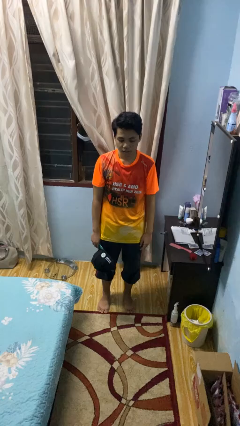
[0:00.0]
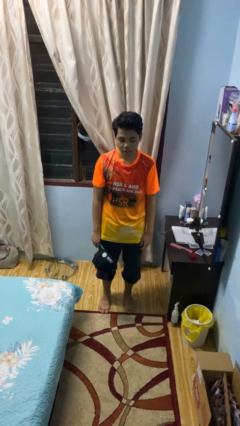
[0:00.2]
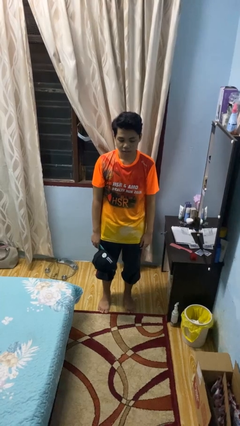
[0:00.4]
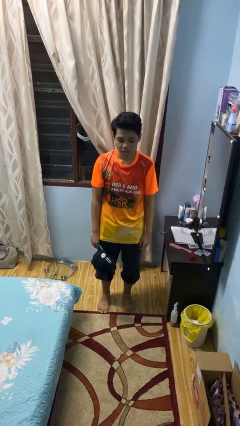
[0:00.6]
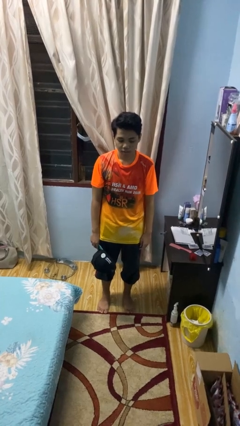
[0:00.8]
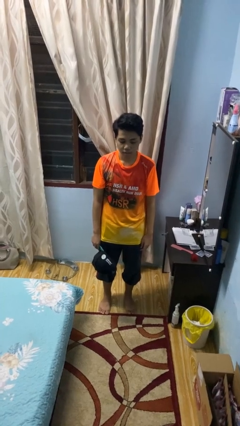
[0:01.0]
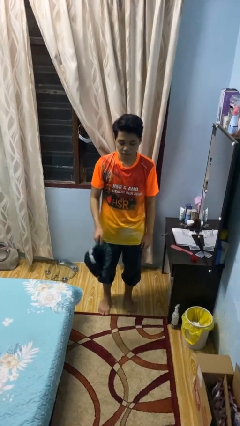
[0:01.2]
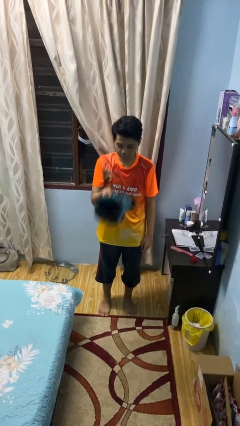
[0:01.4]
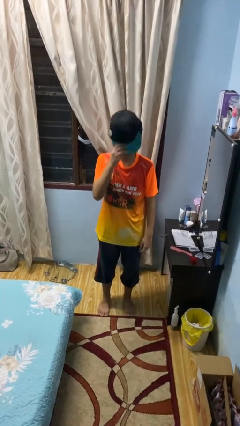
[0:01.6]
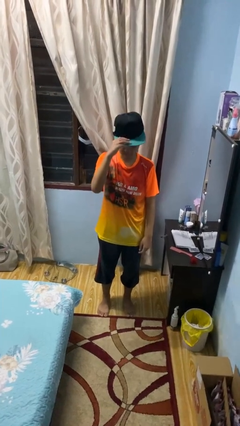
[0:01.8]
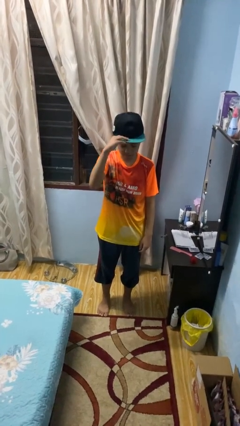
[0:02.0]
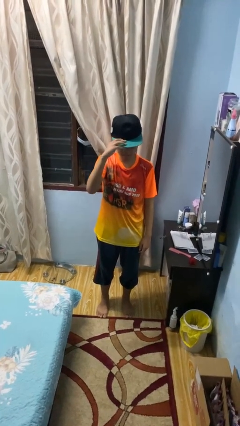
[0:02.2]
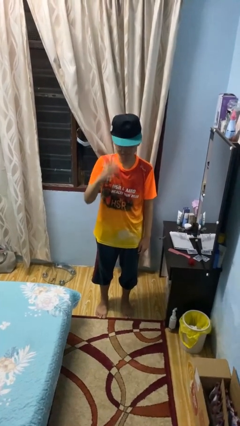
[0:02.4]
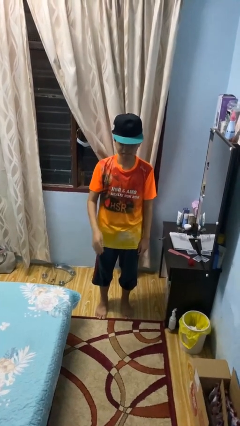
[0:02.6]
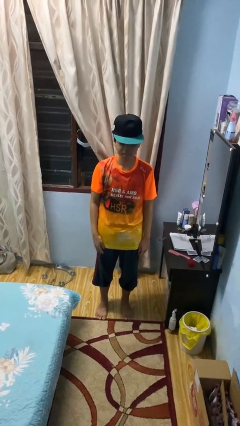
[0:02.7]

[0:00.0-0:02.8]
person puts on hat

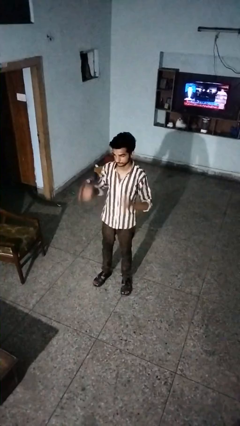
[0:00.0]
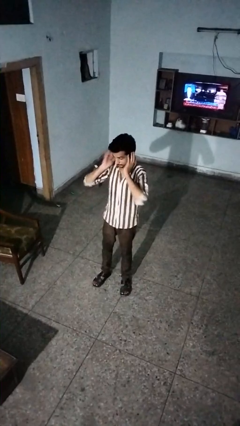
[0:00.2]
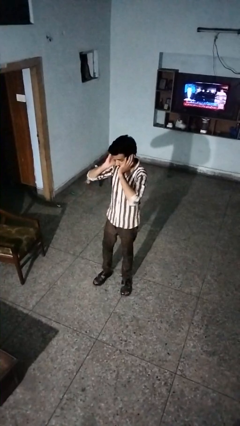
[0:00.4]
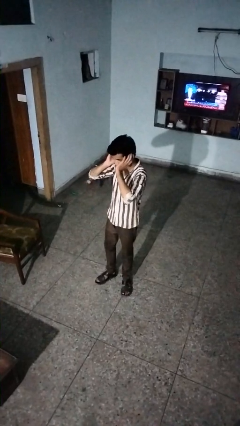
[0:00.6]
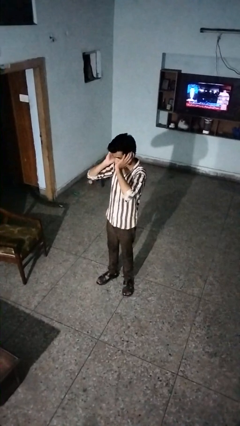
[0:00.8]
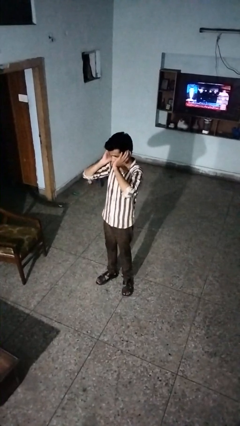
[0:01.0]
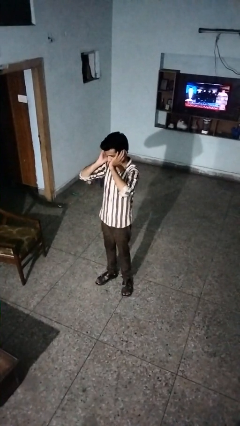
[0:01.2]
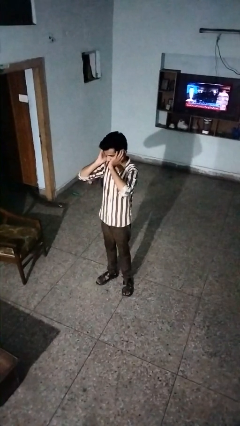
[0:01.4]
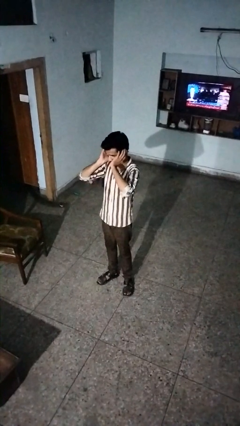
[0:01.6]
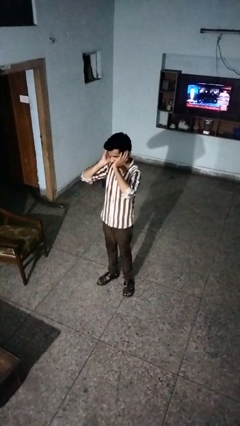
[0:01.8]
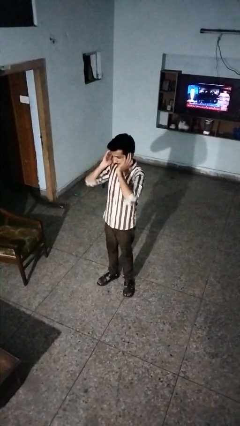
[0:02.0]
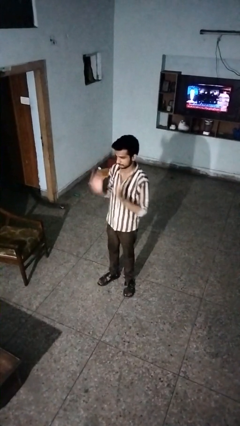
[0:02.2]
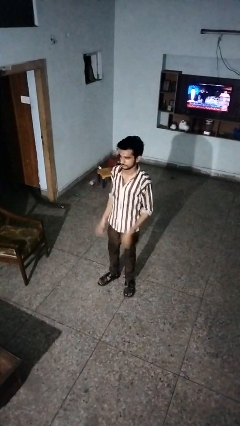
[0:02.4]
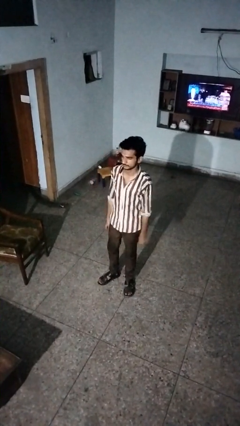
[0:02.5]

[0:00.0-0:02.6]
person puts fingers in ear

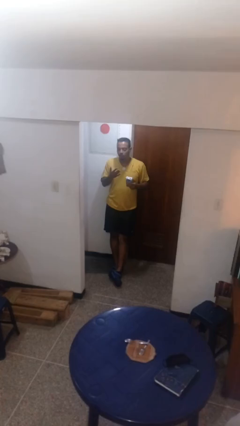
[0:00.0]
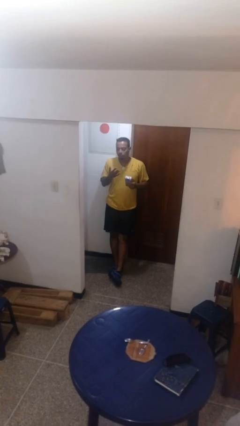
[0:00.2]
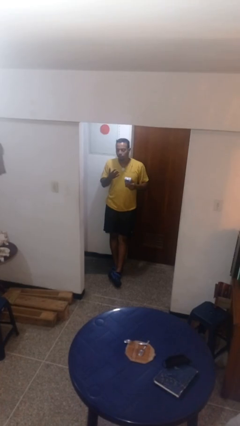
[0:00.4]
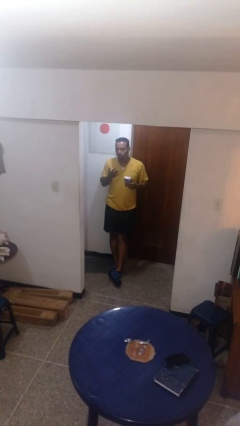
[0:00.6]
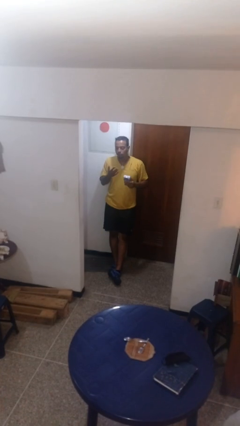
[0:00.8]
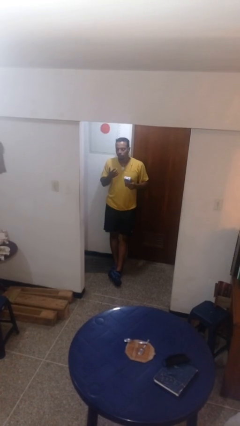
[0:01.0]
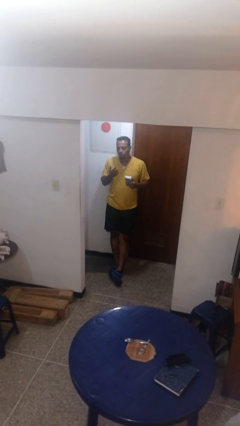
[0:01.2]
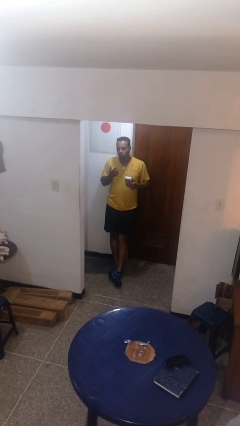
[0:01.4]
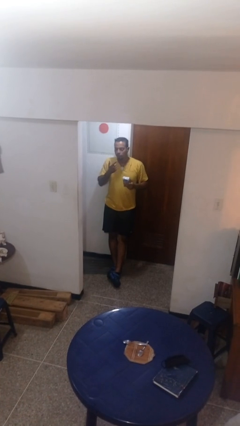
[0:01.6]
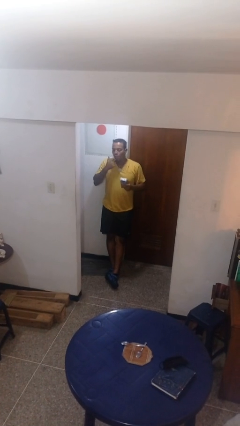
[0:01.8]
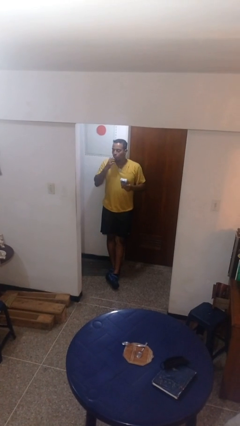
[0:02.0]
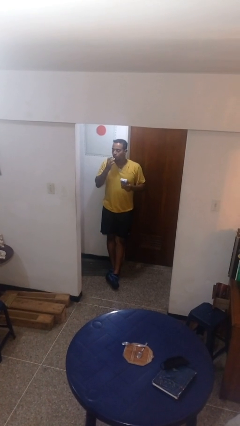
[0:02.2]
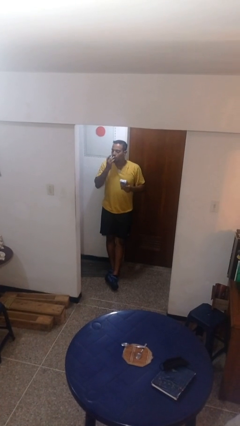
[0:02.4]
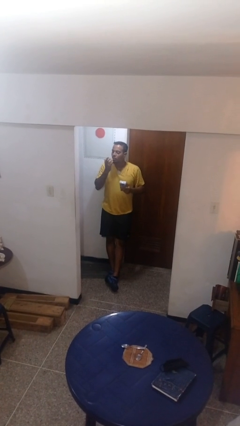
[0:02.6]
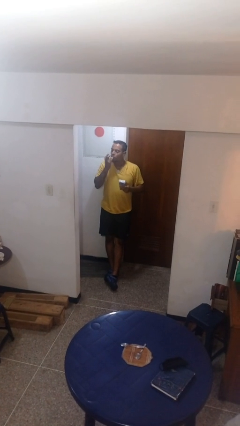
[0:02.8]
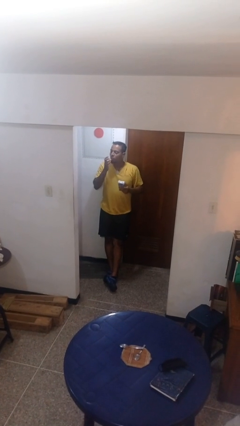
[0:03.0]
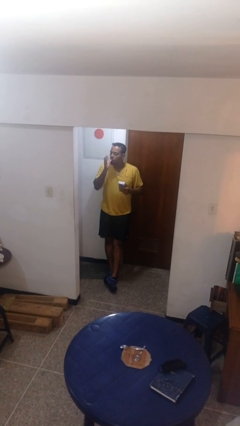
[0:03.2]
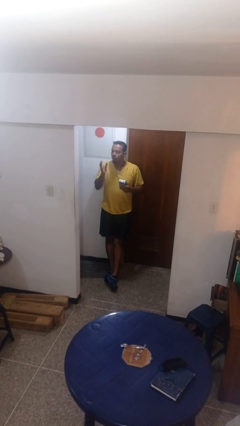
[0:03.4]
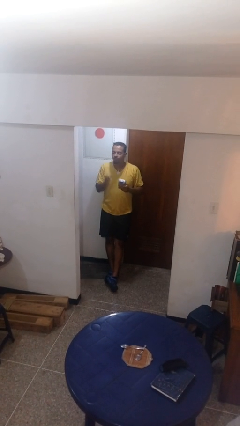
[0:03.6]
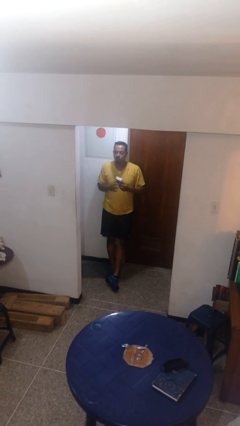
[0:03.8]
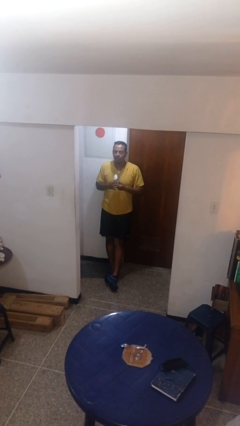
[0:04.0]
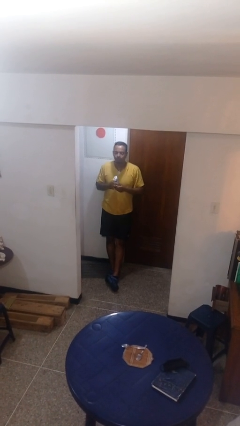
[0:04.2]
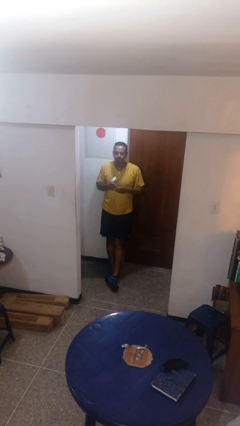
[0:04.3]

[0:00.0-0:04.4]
person licks fingers

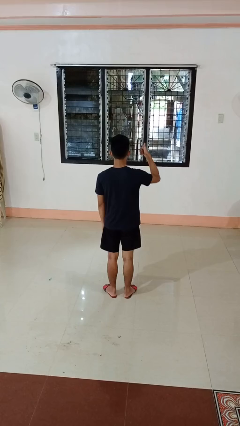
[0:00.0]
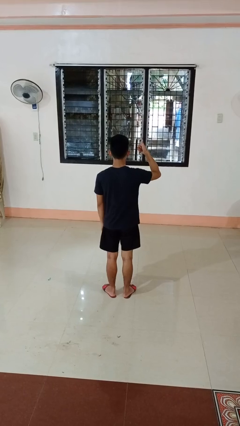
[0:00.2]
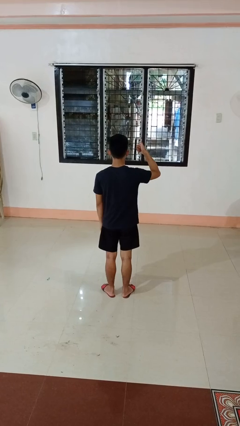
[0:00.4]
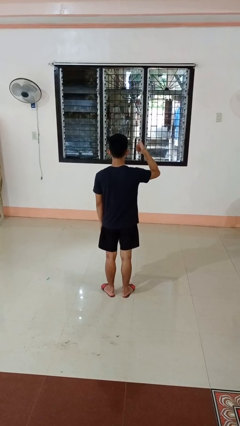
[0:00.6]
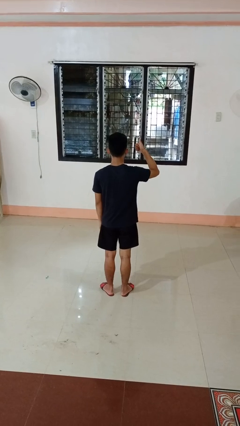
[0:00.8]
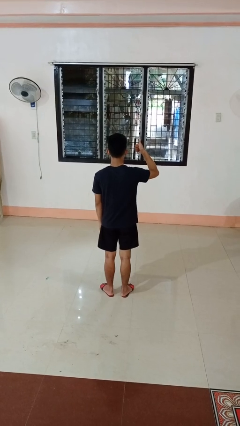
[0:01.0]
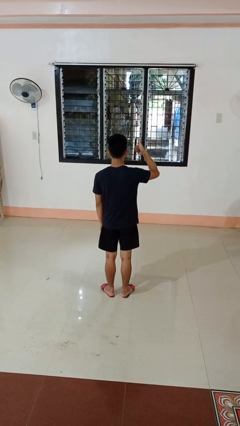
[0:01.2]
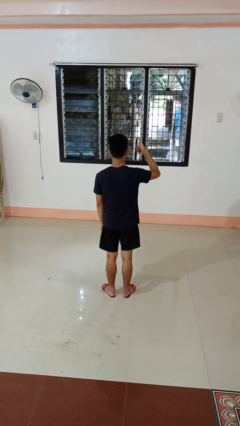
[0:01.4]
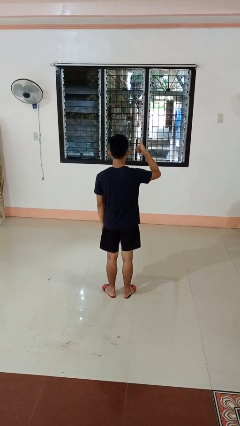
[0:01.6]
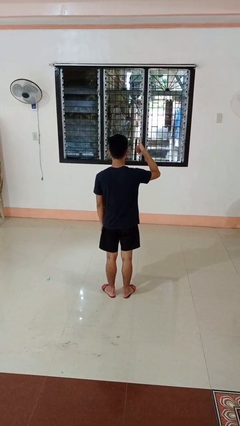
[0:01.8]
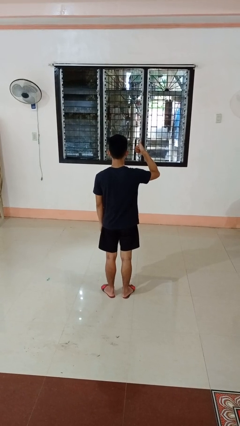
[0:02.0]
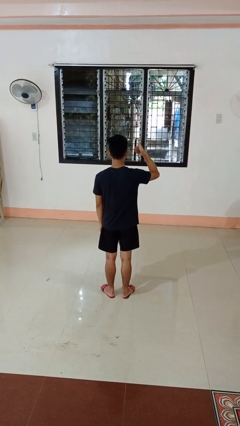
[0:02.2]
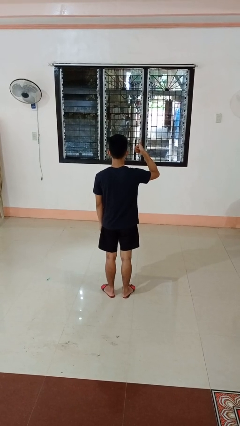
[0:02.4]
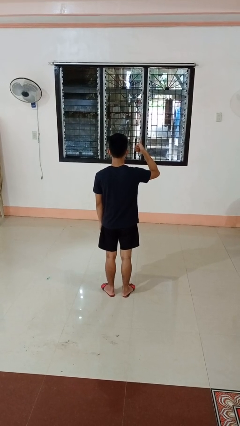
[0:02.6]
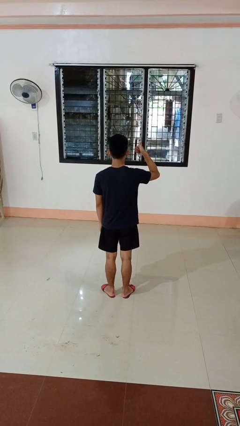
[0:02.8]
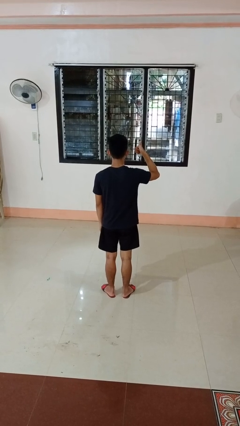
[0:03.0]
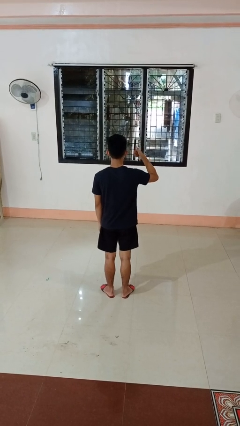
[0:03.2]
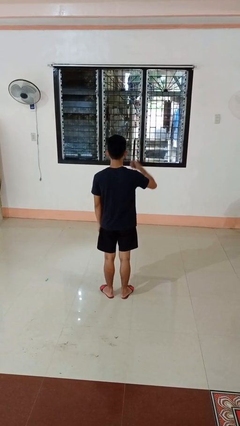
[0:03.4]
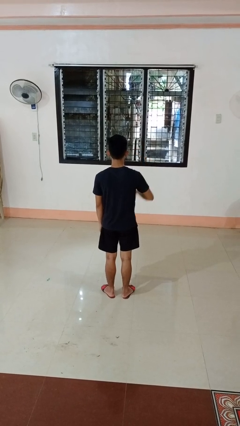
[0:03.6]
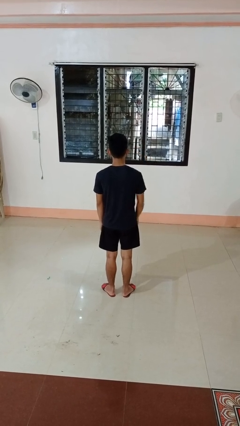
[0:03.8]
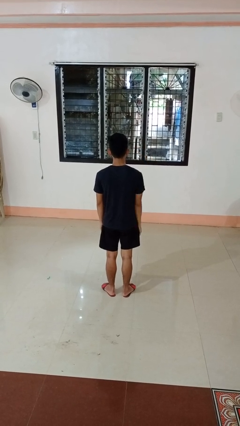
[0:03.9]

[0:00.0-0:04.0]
person gestures thumbs up

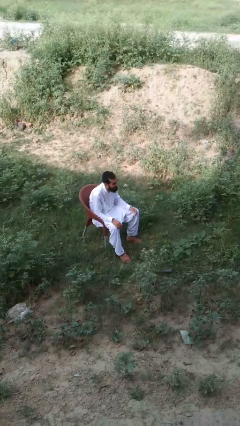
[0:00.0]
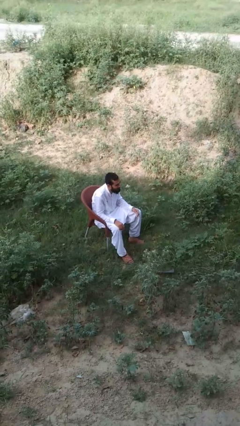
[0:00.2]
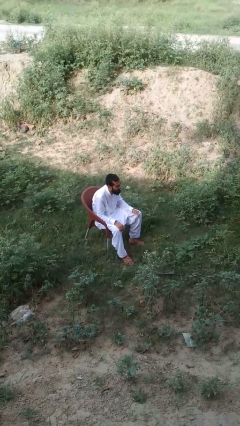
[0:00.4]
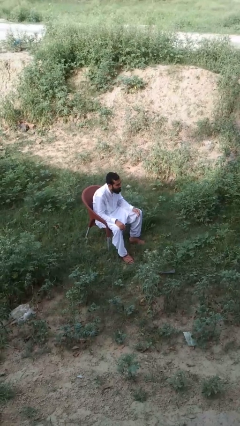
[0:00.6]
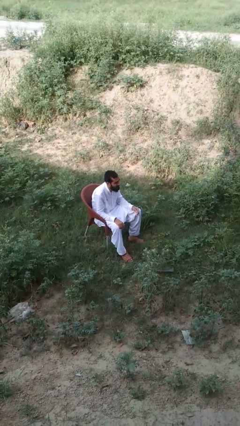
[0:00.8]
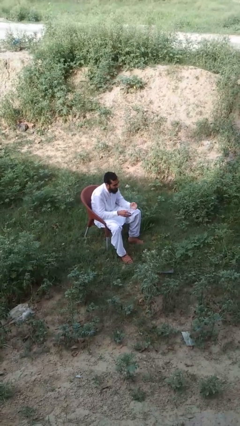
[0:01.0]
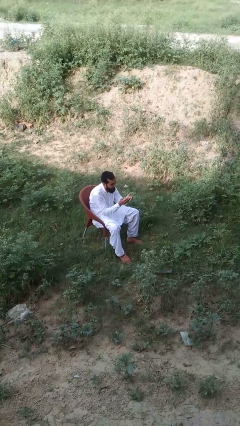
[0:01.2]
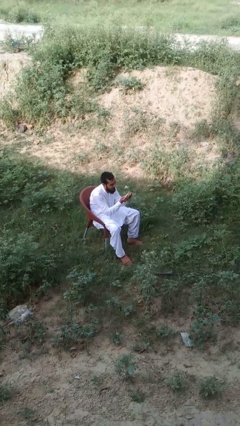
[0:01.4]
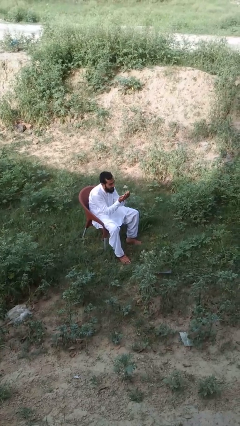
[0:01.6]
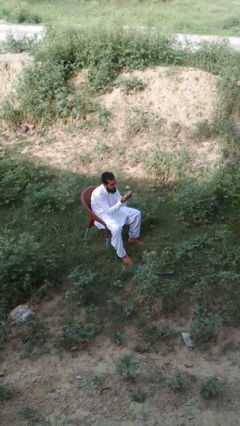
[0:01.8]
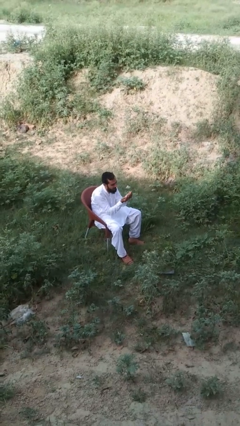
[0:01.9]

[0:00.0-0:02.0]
person prays

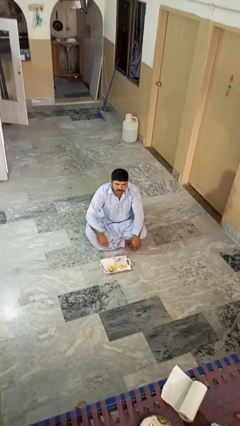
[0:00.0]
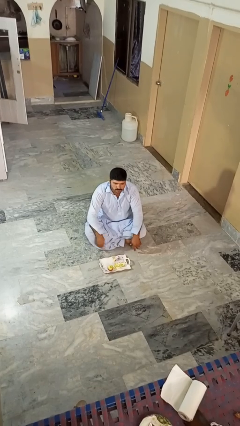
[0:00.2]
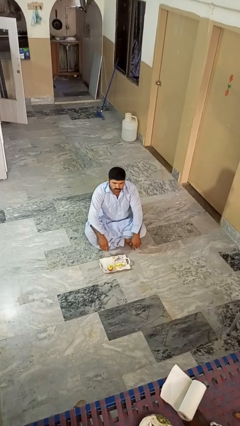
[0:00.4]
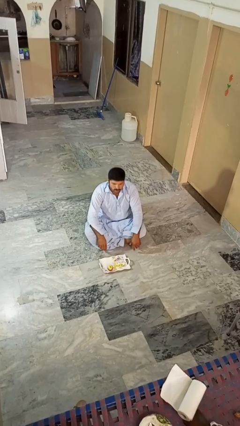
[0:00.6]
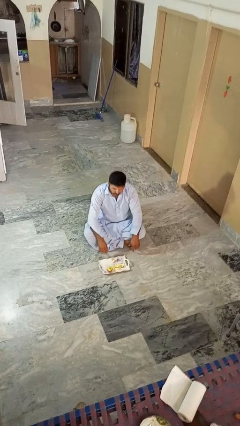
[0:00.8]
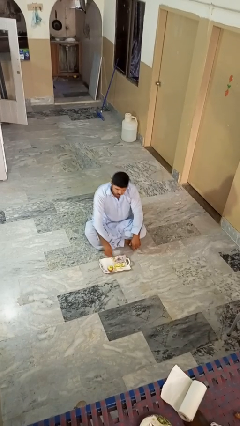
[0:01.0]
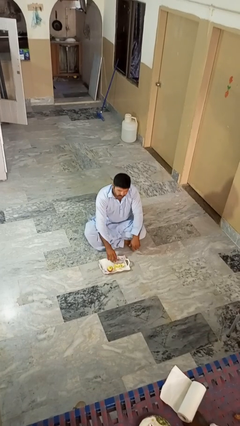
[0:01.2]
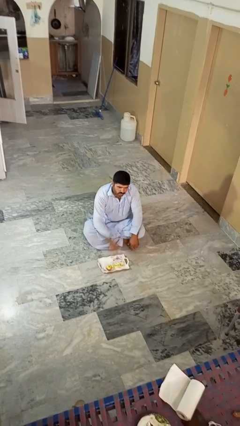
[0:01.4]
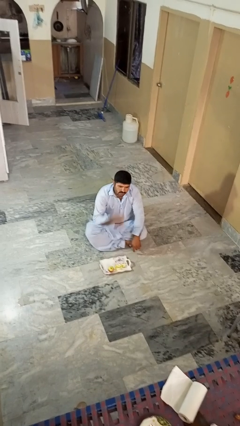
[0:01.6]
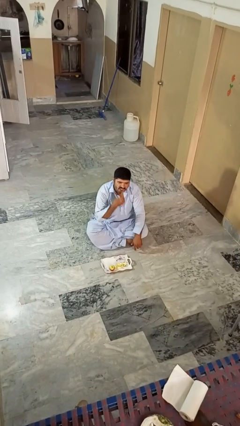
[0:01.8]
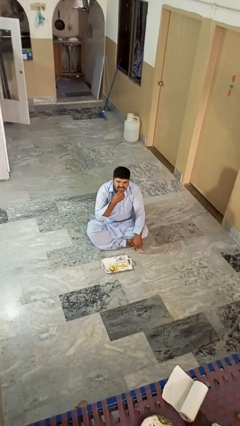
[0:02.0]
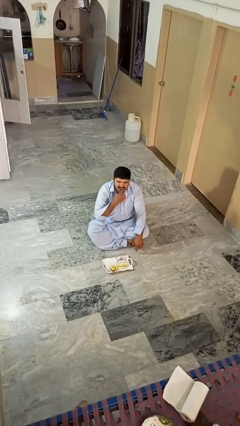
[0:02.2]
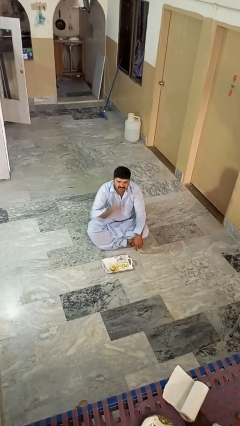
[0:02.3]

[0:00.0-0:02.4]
person eats apple
